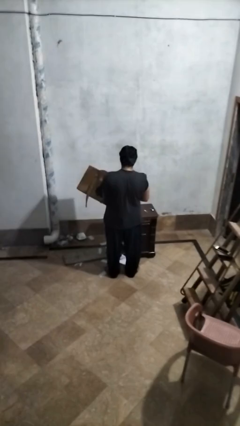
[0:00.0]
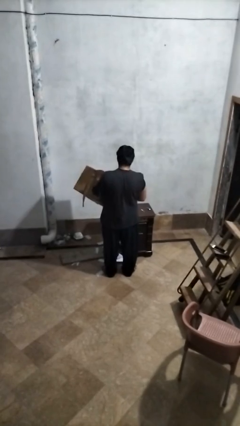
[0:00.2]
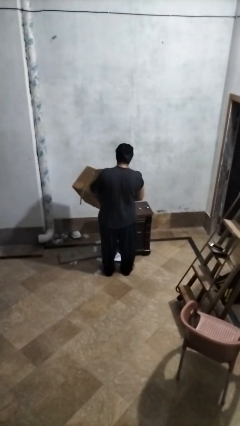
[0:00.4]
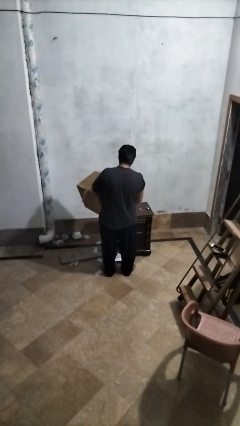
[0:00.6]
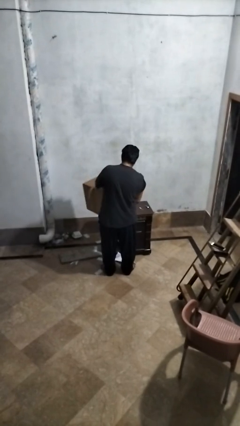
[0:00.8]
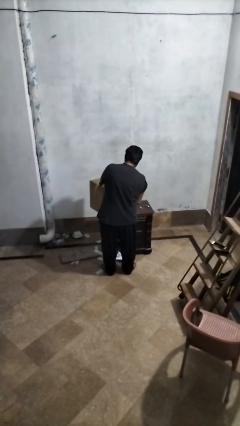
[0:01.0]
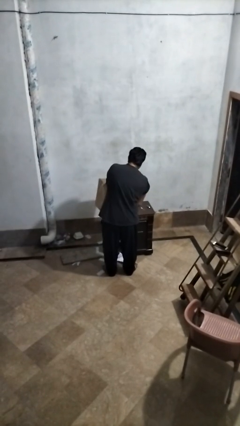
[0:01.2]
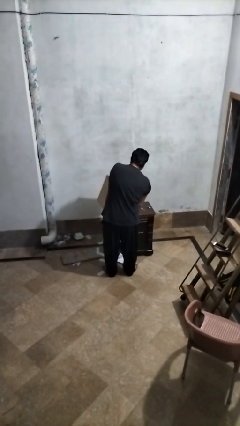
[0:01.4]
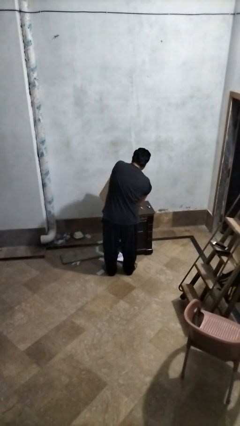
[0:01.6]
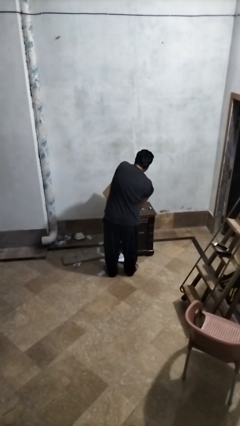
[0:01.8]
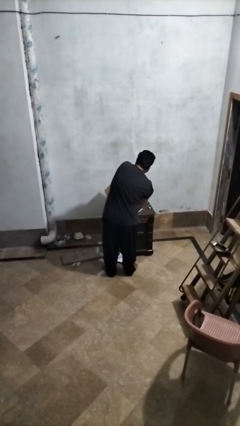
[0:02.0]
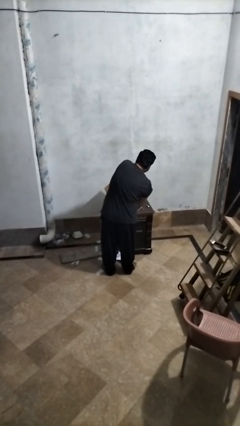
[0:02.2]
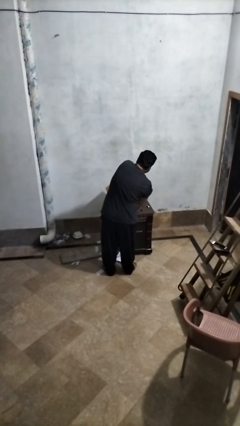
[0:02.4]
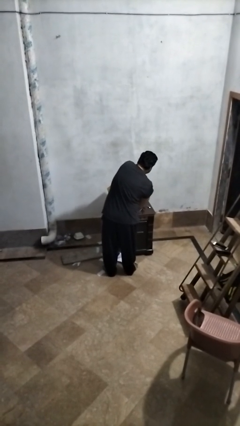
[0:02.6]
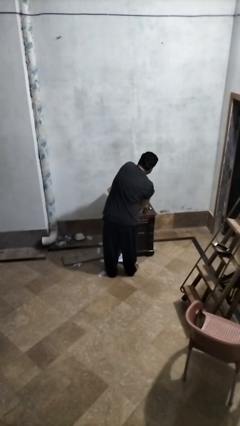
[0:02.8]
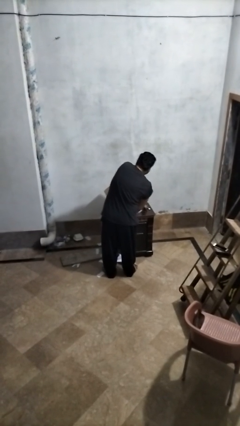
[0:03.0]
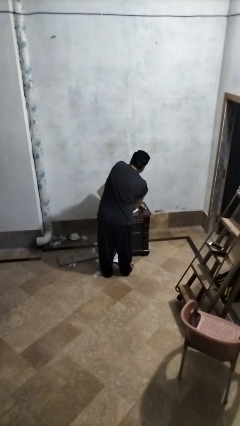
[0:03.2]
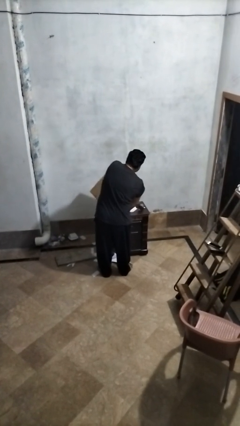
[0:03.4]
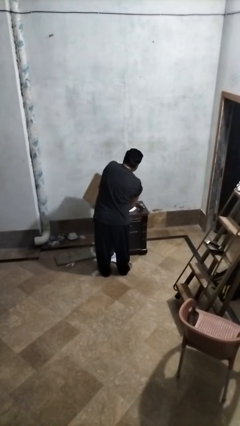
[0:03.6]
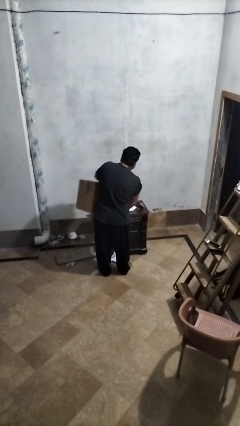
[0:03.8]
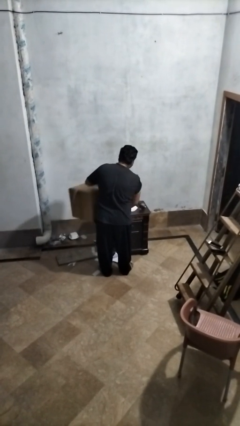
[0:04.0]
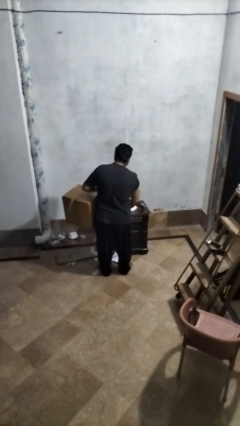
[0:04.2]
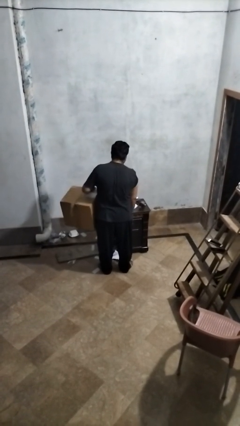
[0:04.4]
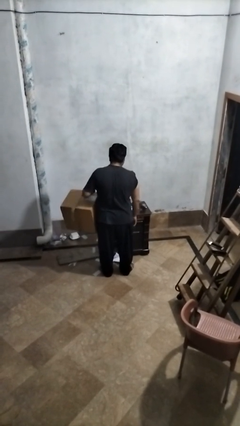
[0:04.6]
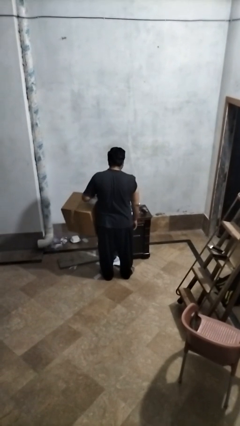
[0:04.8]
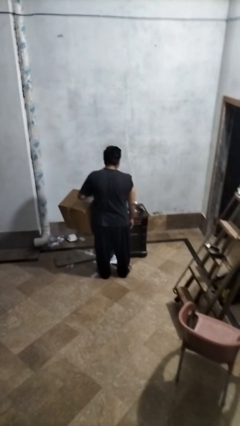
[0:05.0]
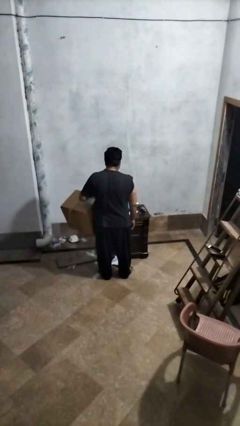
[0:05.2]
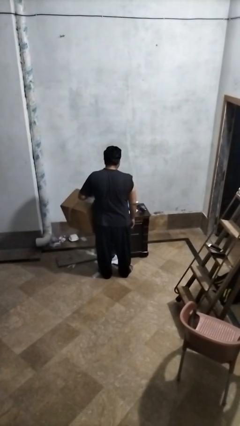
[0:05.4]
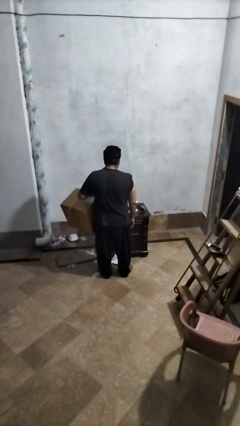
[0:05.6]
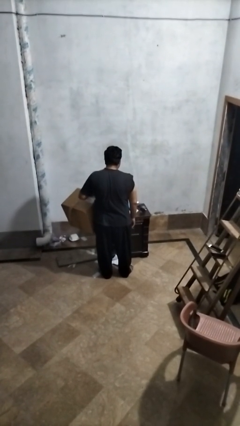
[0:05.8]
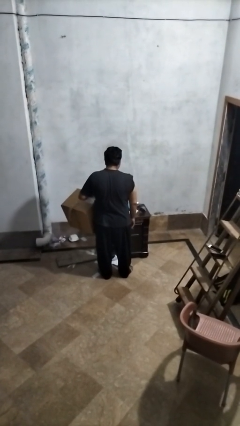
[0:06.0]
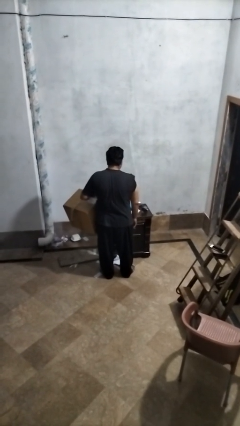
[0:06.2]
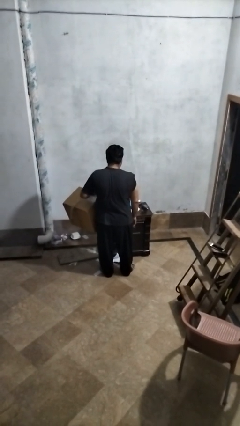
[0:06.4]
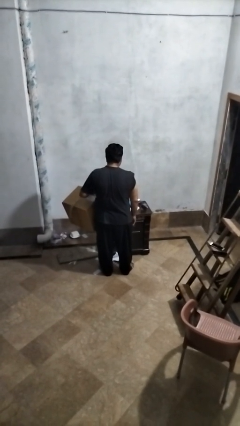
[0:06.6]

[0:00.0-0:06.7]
person unloads box onto table

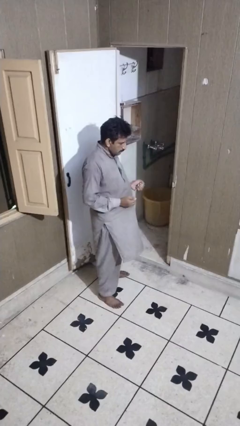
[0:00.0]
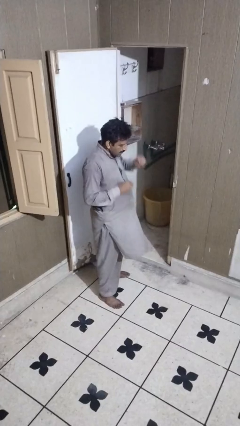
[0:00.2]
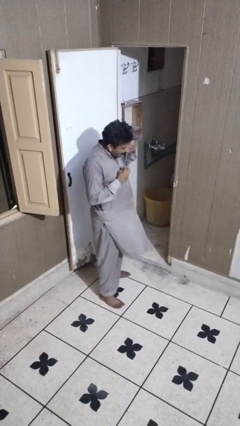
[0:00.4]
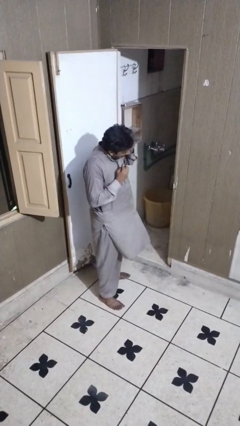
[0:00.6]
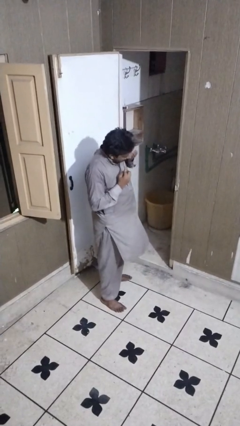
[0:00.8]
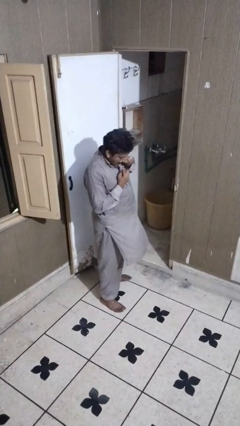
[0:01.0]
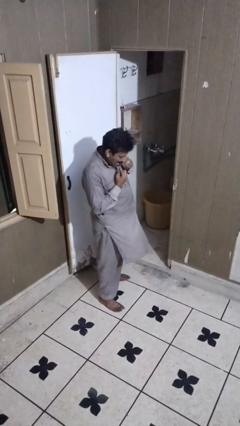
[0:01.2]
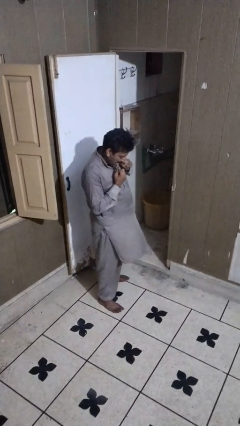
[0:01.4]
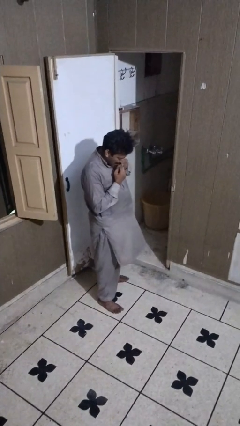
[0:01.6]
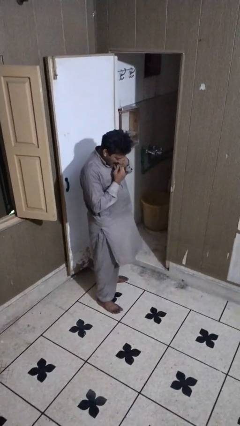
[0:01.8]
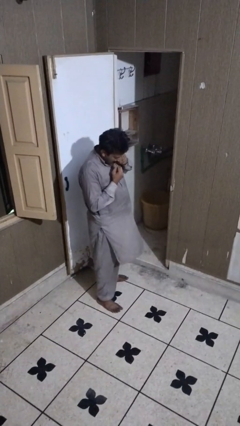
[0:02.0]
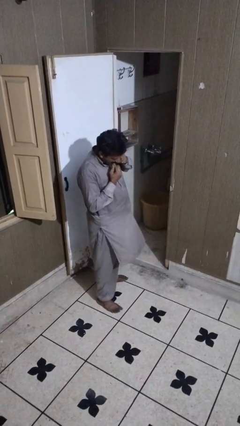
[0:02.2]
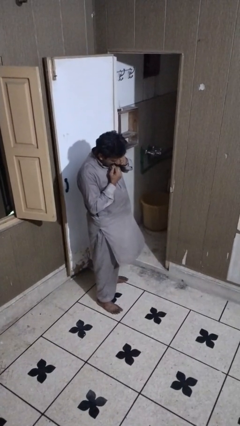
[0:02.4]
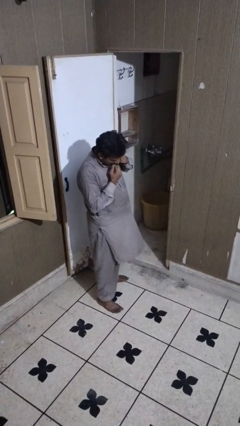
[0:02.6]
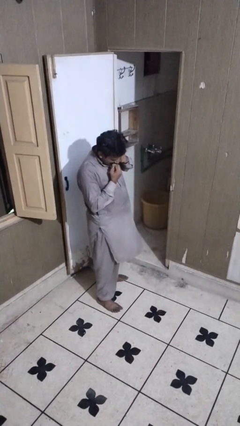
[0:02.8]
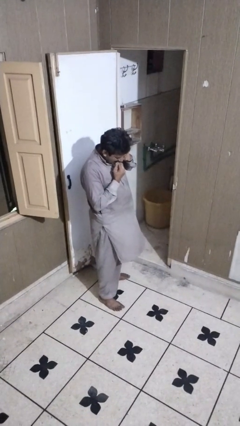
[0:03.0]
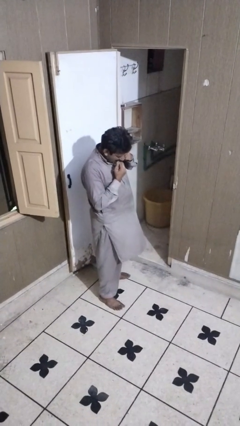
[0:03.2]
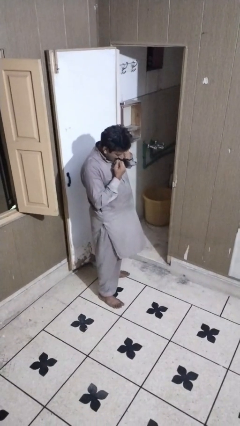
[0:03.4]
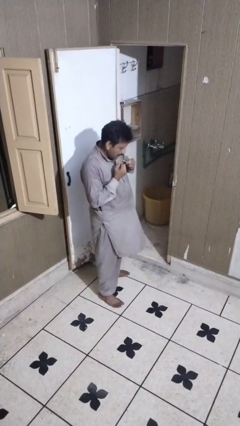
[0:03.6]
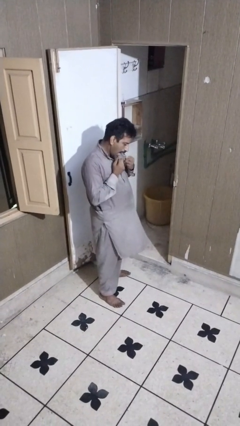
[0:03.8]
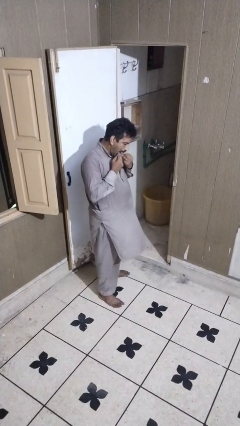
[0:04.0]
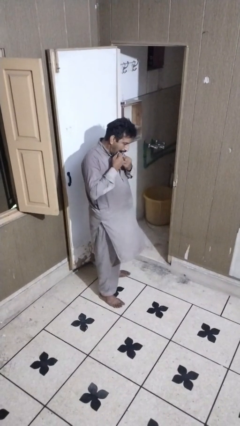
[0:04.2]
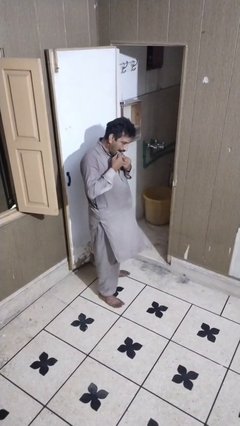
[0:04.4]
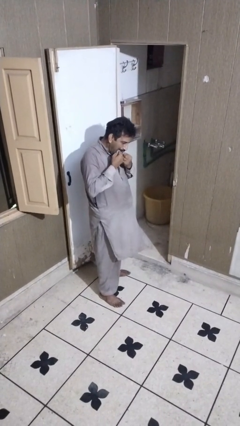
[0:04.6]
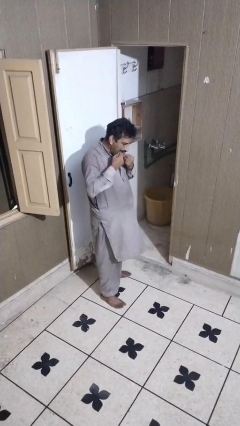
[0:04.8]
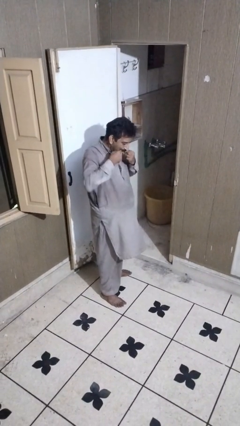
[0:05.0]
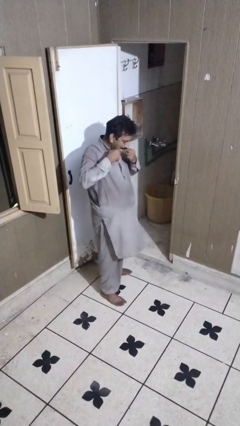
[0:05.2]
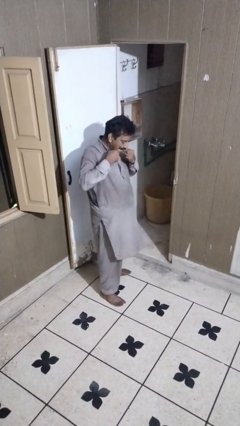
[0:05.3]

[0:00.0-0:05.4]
person flosses

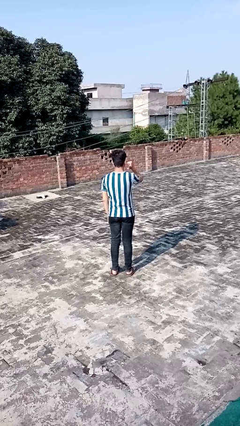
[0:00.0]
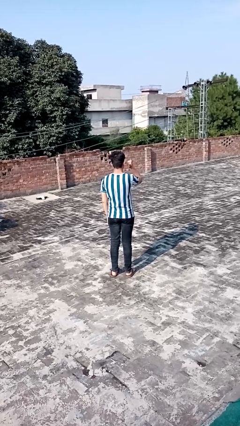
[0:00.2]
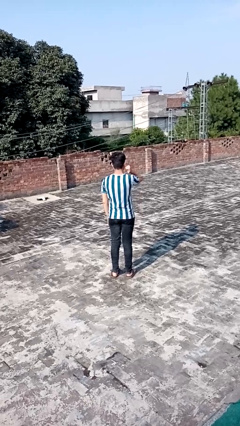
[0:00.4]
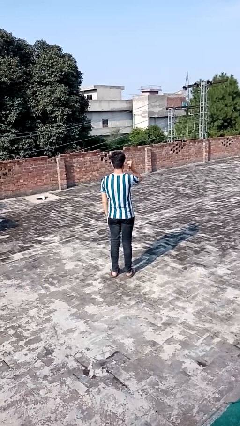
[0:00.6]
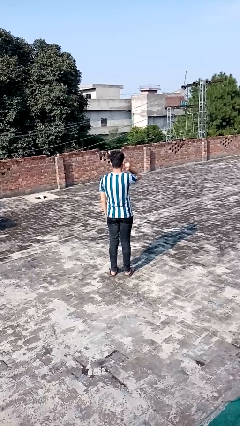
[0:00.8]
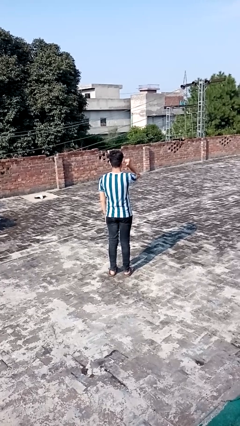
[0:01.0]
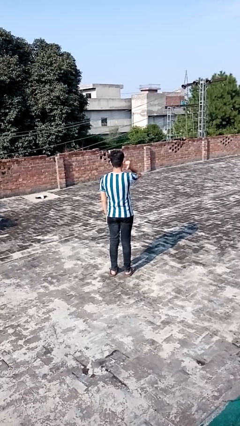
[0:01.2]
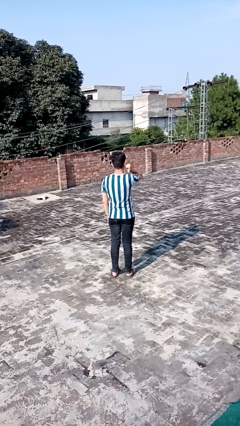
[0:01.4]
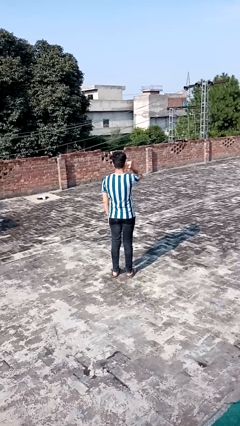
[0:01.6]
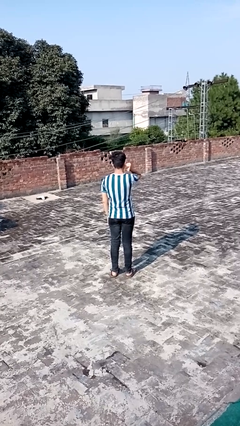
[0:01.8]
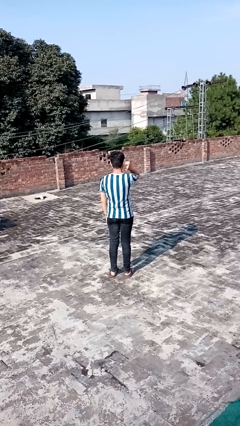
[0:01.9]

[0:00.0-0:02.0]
person gestures behind me

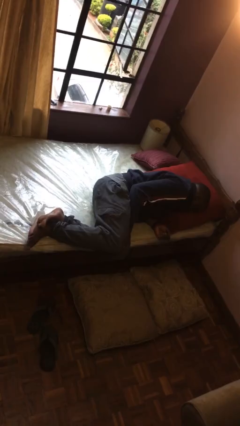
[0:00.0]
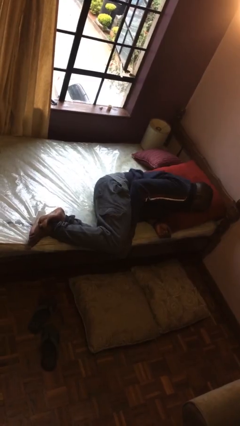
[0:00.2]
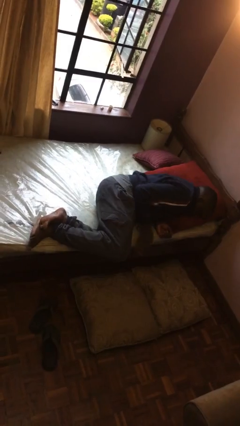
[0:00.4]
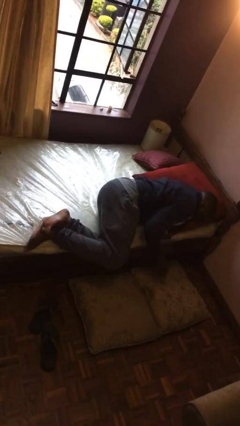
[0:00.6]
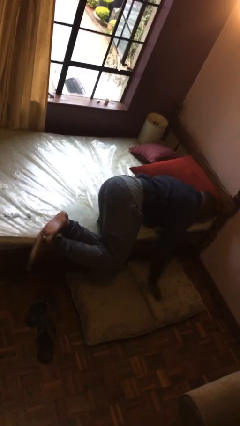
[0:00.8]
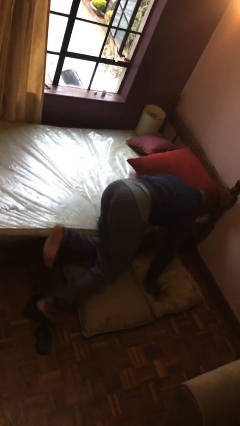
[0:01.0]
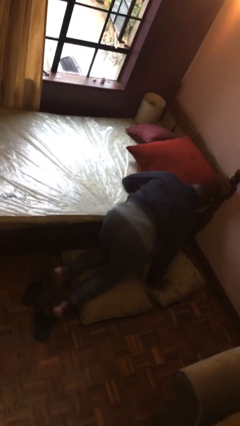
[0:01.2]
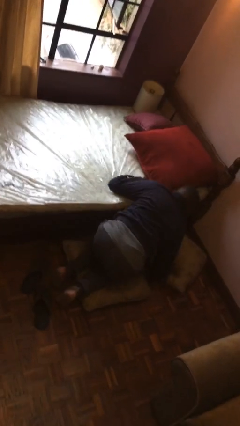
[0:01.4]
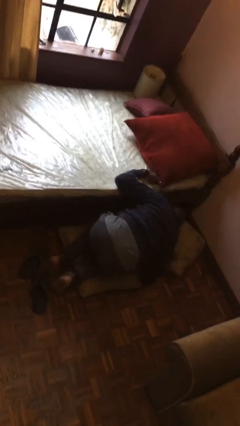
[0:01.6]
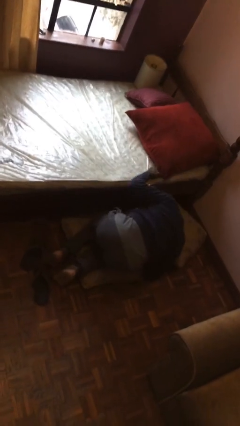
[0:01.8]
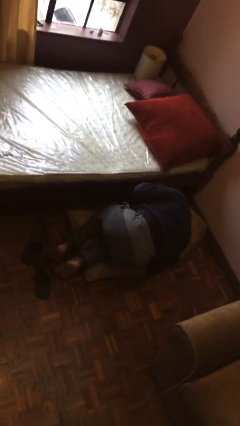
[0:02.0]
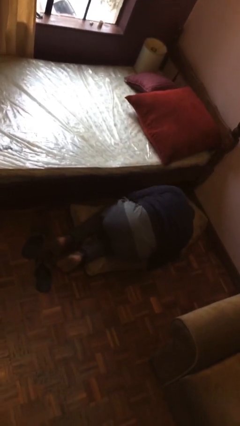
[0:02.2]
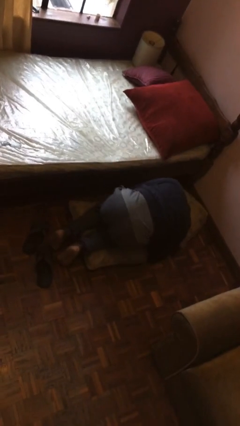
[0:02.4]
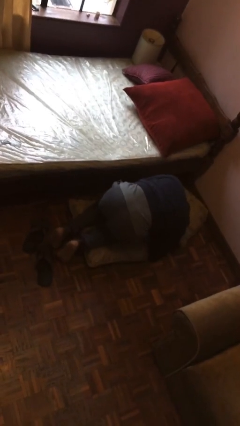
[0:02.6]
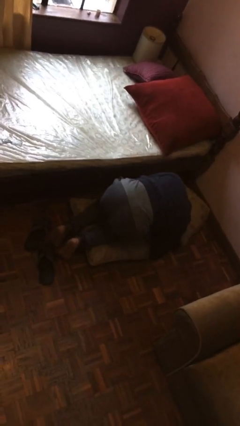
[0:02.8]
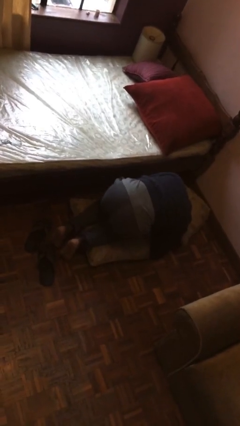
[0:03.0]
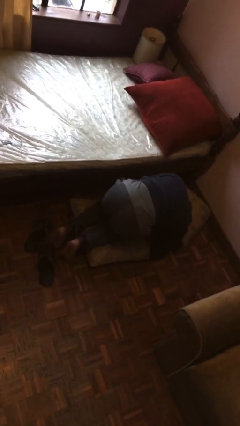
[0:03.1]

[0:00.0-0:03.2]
person falls from bed

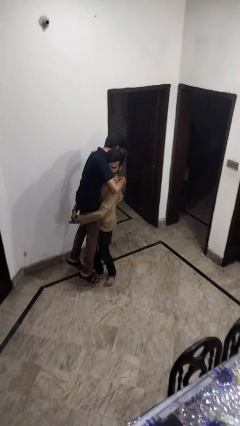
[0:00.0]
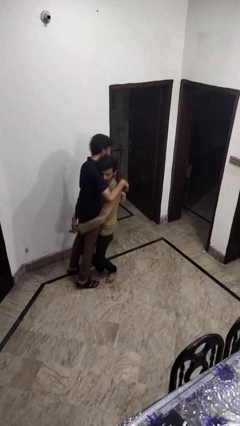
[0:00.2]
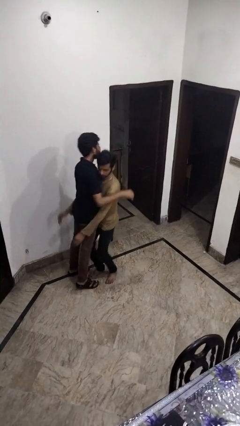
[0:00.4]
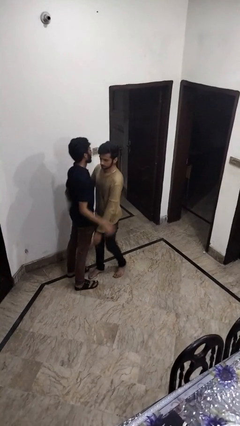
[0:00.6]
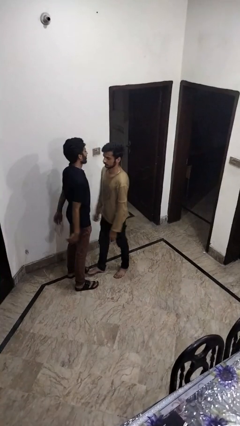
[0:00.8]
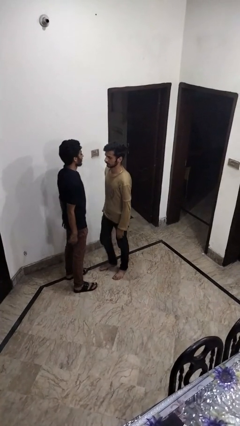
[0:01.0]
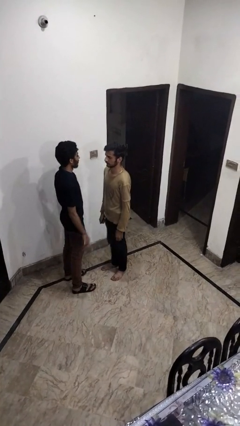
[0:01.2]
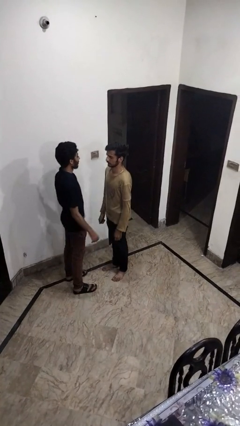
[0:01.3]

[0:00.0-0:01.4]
person puts down person
